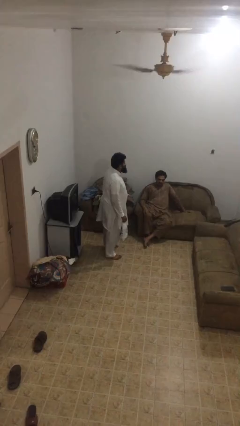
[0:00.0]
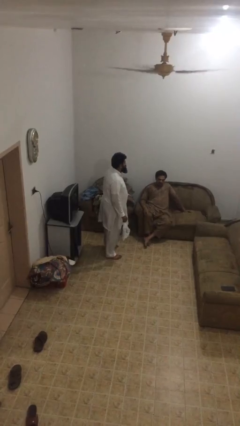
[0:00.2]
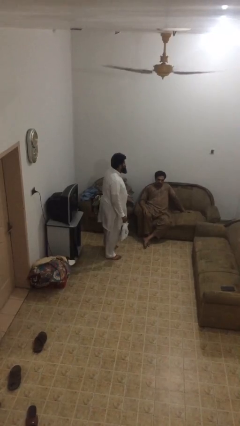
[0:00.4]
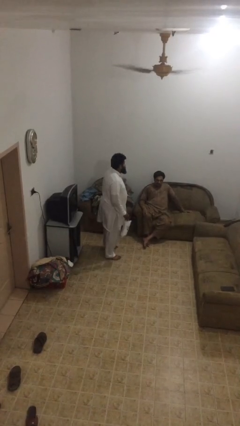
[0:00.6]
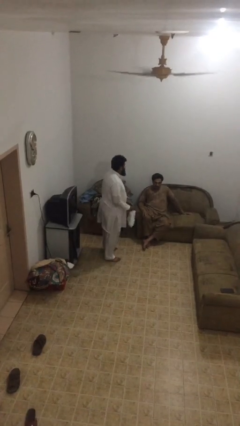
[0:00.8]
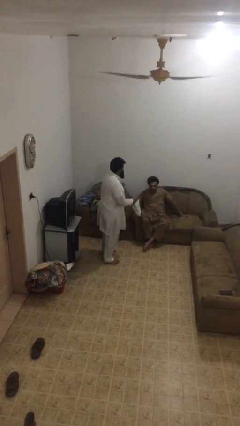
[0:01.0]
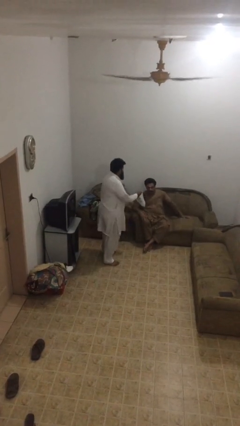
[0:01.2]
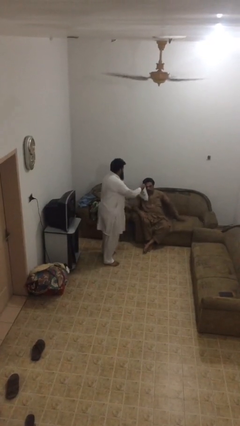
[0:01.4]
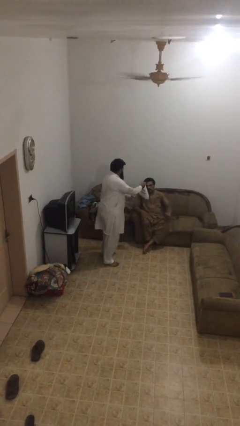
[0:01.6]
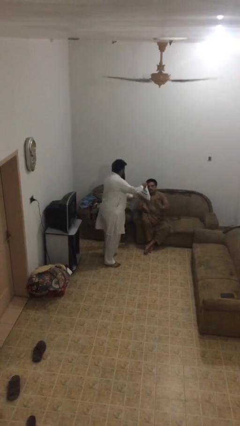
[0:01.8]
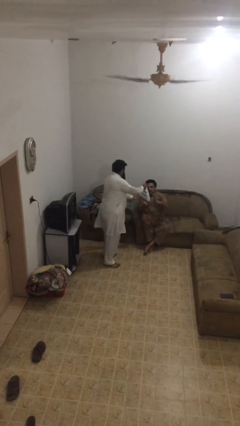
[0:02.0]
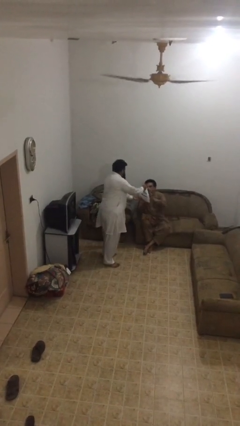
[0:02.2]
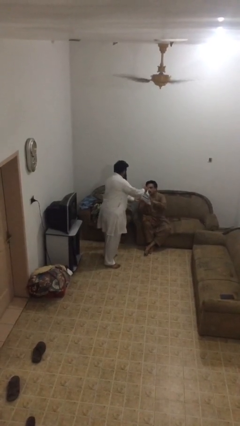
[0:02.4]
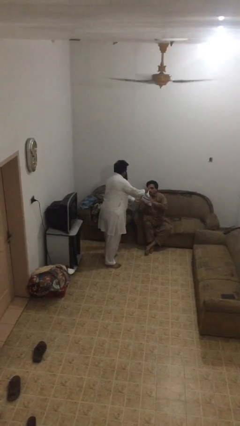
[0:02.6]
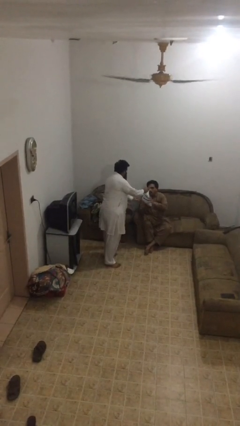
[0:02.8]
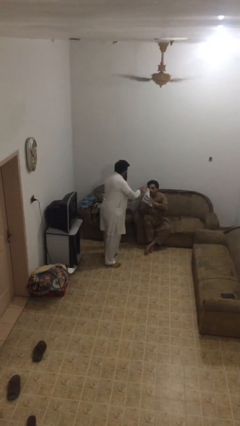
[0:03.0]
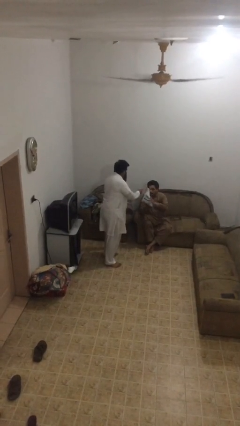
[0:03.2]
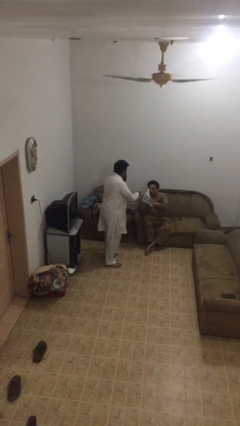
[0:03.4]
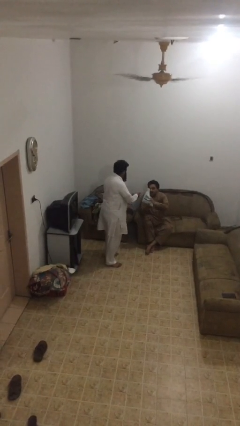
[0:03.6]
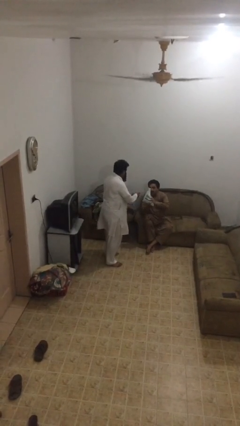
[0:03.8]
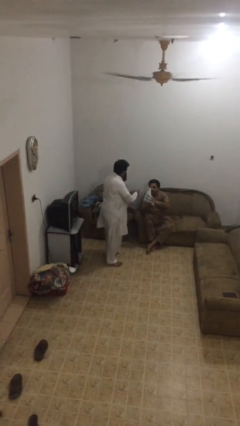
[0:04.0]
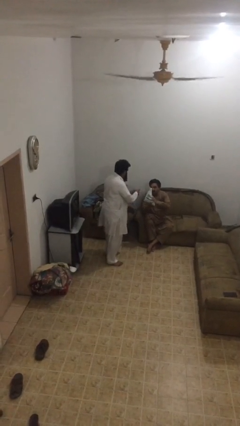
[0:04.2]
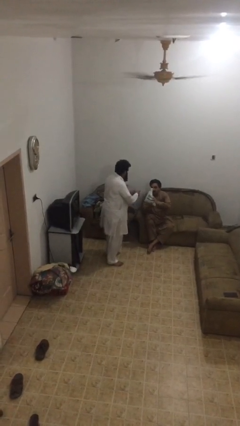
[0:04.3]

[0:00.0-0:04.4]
person transfers object to person

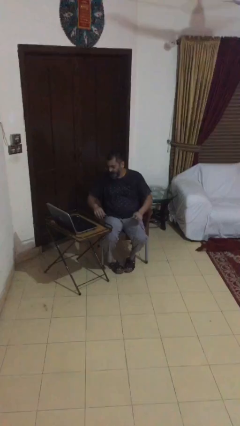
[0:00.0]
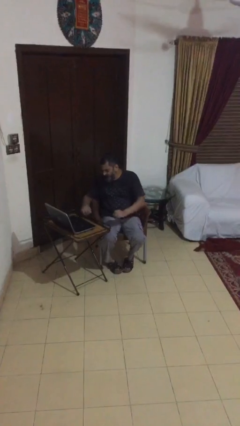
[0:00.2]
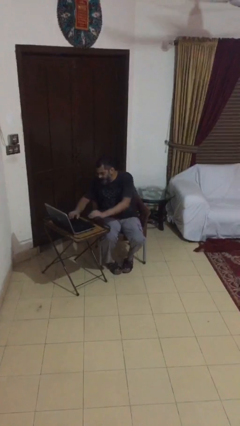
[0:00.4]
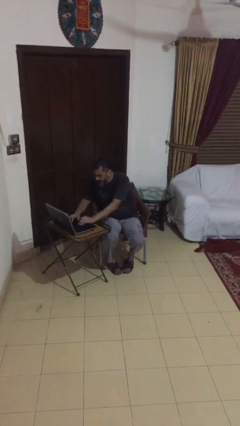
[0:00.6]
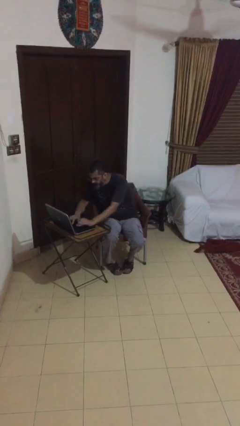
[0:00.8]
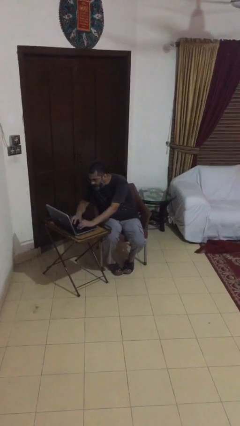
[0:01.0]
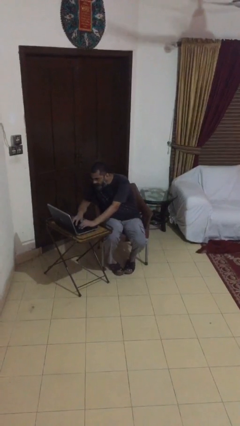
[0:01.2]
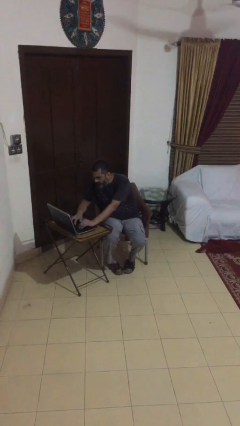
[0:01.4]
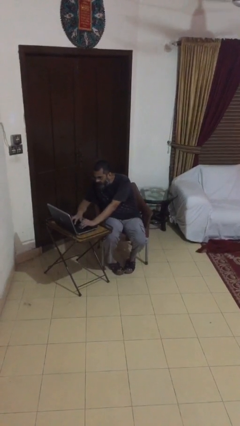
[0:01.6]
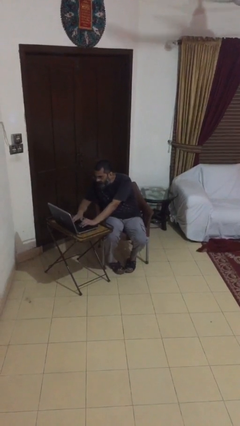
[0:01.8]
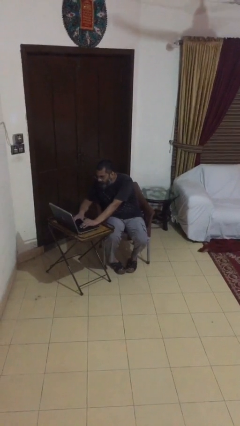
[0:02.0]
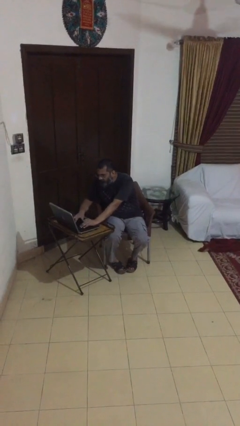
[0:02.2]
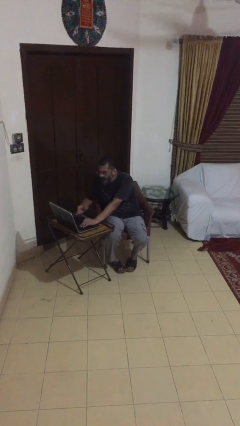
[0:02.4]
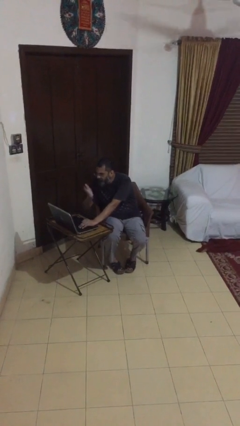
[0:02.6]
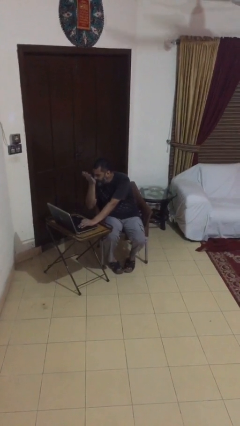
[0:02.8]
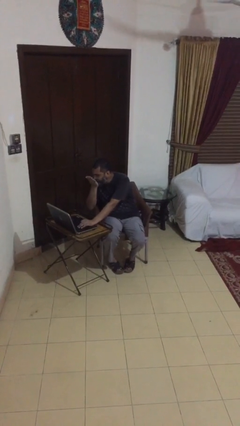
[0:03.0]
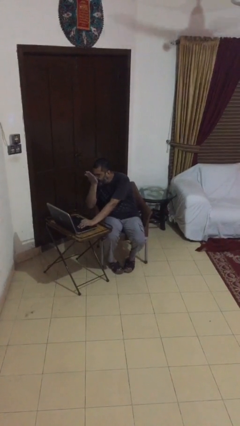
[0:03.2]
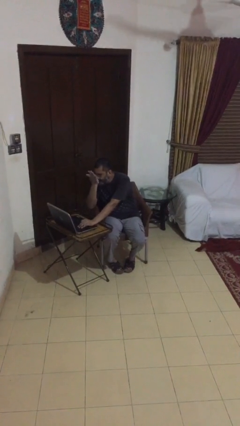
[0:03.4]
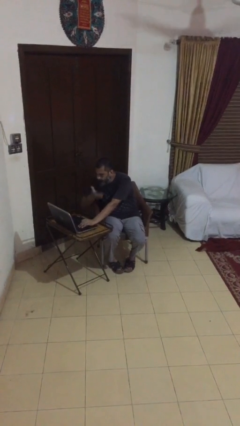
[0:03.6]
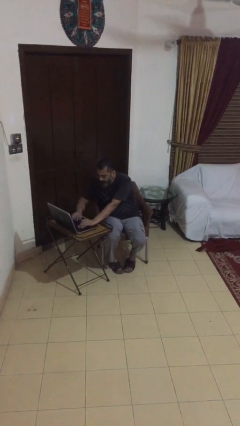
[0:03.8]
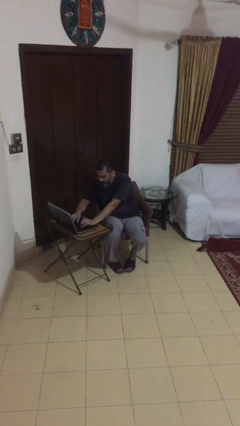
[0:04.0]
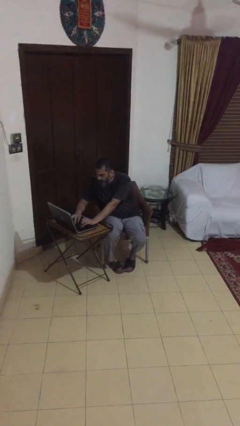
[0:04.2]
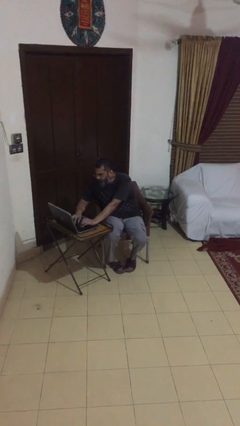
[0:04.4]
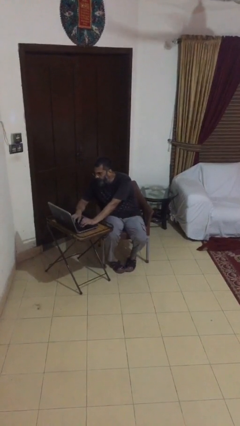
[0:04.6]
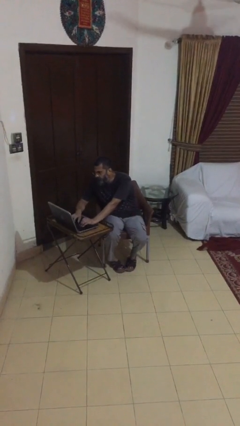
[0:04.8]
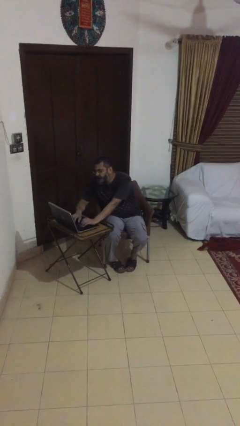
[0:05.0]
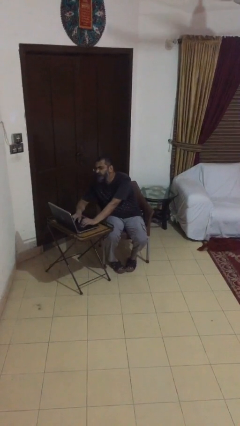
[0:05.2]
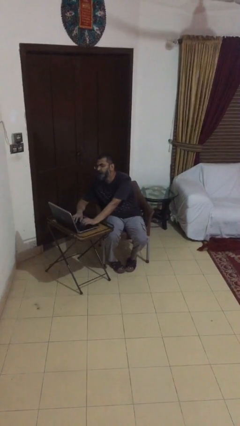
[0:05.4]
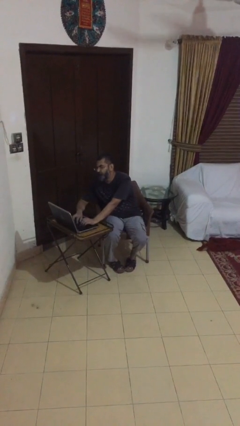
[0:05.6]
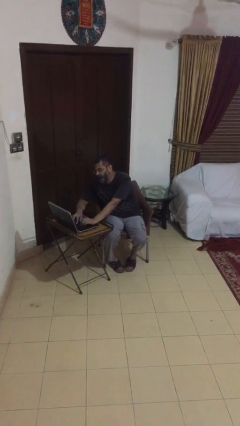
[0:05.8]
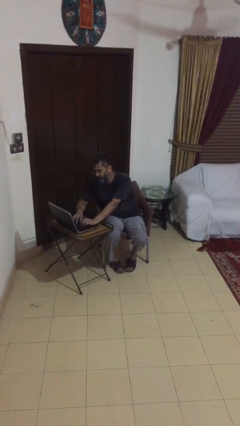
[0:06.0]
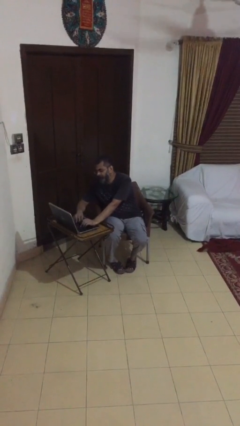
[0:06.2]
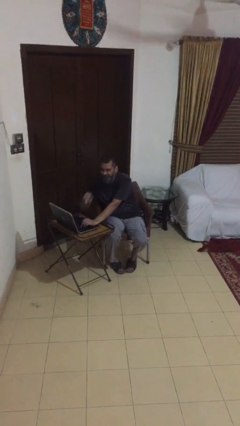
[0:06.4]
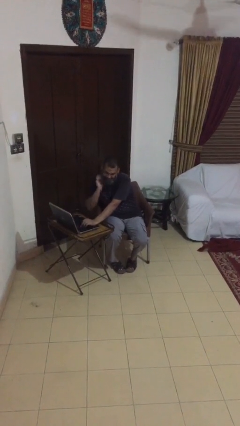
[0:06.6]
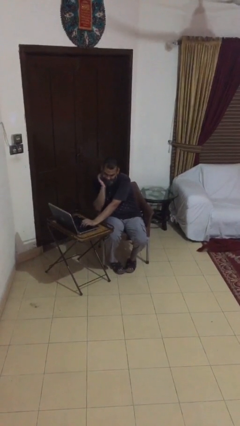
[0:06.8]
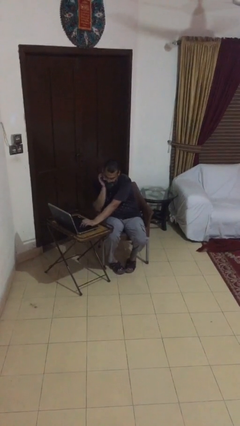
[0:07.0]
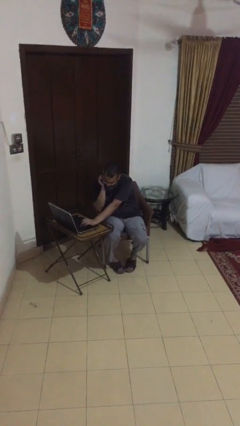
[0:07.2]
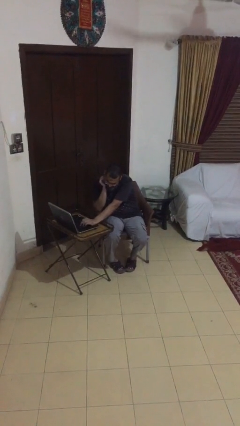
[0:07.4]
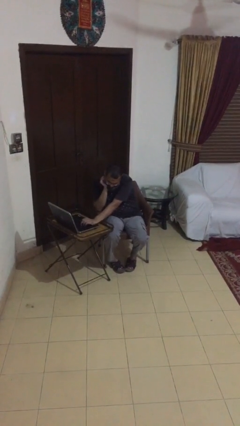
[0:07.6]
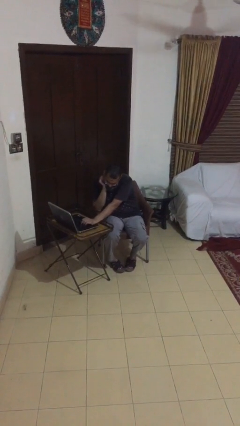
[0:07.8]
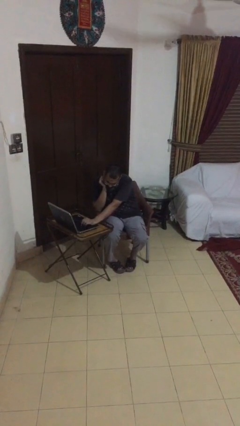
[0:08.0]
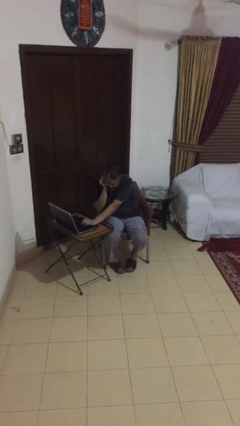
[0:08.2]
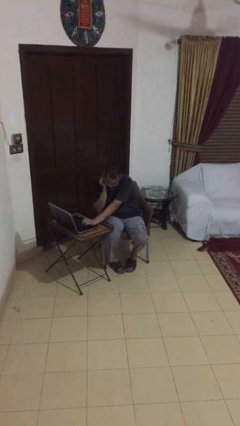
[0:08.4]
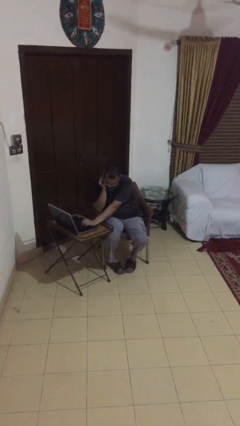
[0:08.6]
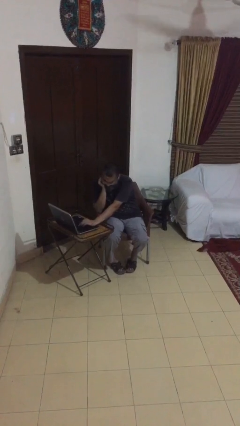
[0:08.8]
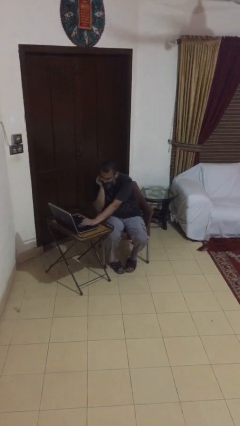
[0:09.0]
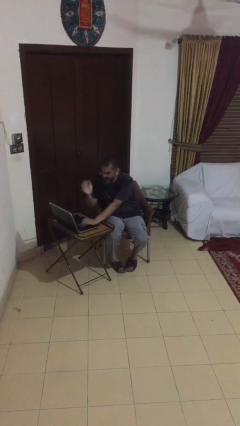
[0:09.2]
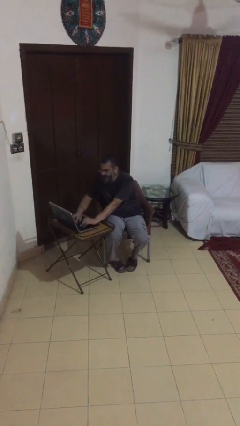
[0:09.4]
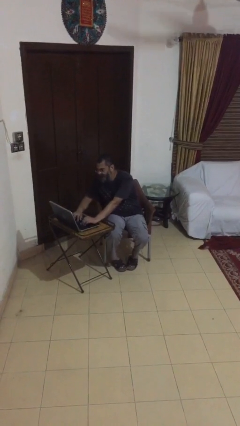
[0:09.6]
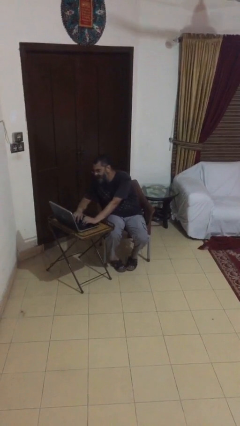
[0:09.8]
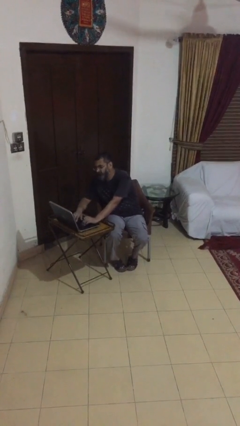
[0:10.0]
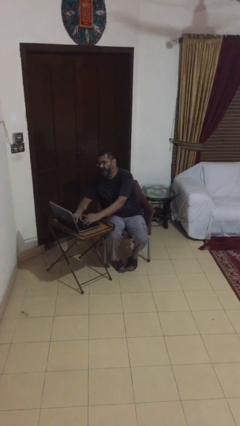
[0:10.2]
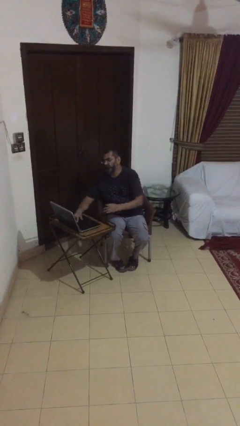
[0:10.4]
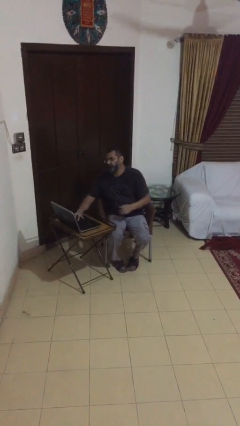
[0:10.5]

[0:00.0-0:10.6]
person interacts with laptop

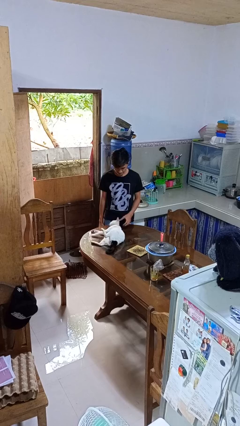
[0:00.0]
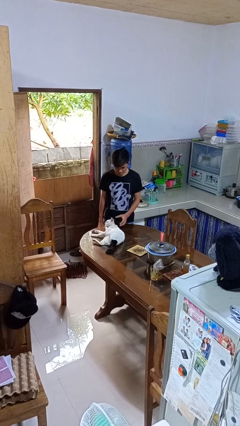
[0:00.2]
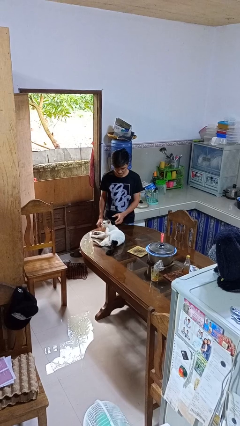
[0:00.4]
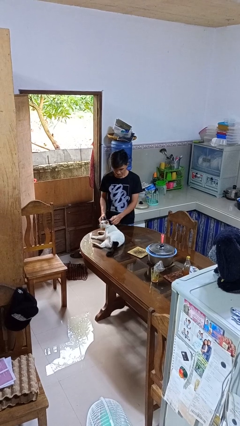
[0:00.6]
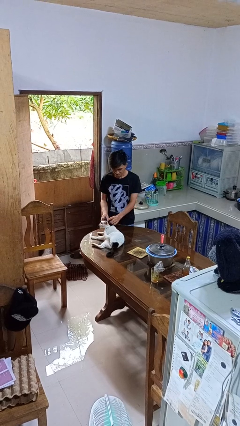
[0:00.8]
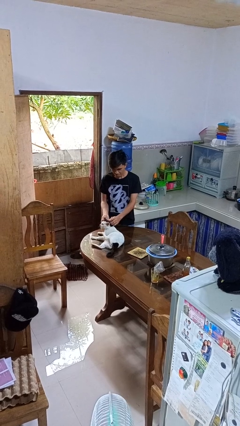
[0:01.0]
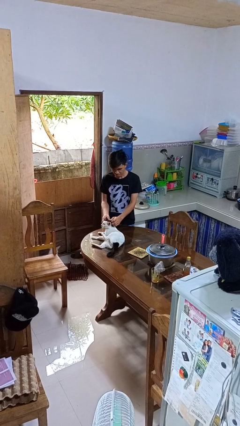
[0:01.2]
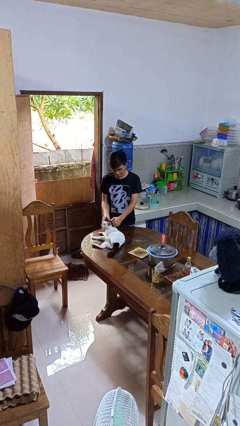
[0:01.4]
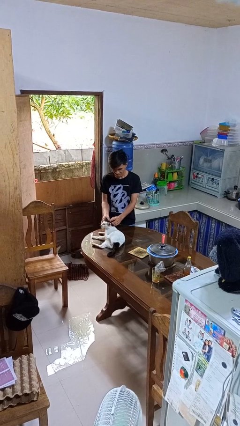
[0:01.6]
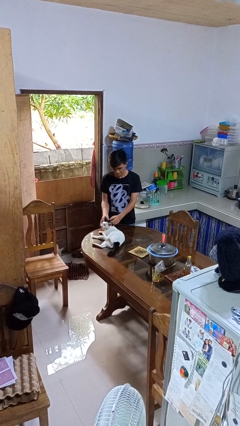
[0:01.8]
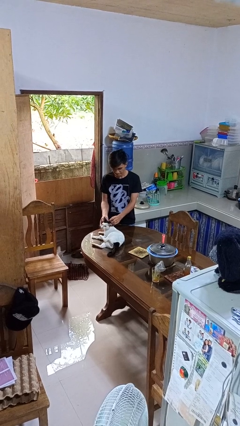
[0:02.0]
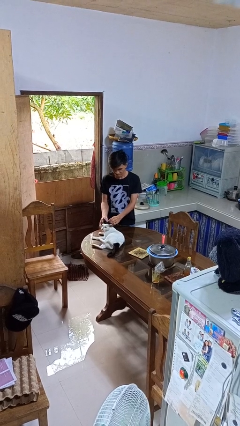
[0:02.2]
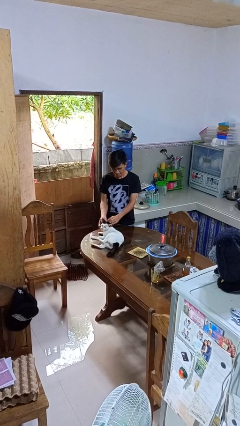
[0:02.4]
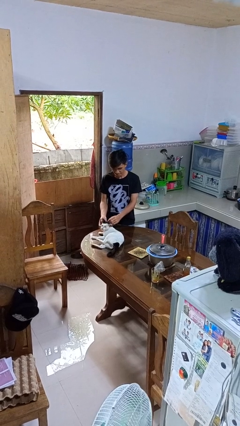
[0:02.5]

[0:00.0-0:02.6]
person pets cat

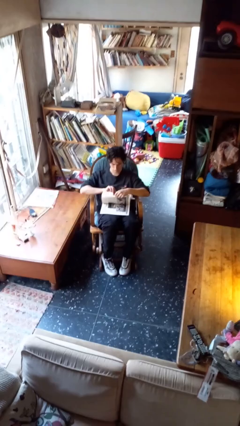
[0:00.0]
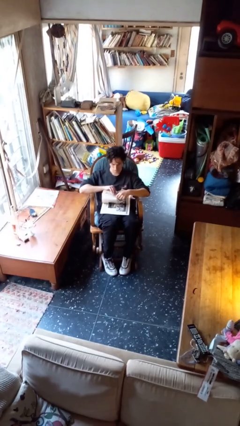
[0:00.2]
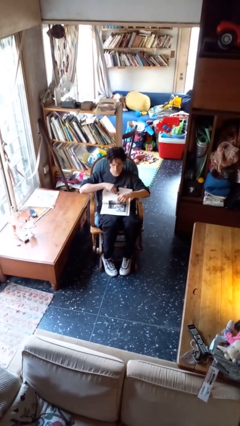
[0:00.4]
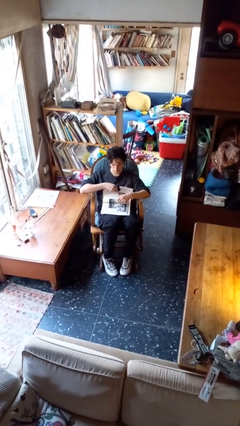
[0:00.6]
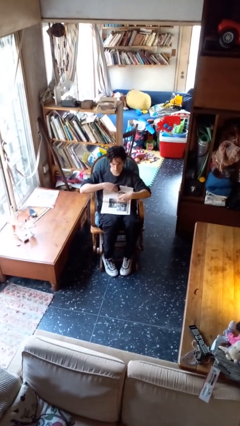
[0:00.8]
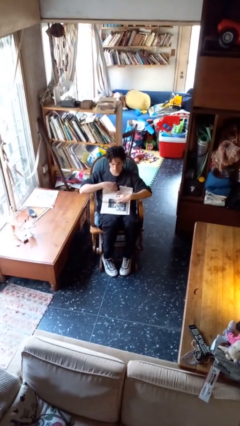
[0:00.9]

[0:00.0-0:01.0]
person tears paper
